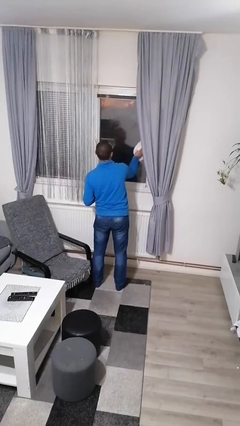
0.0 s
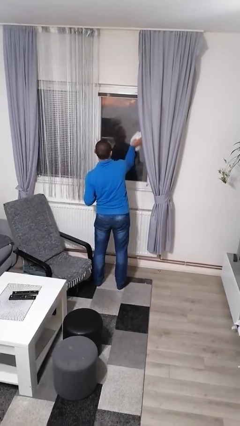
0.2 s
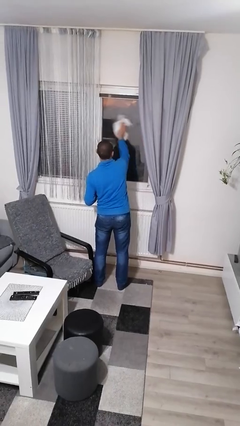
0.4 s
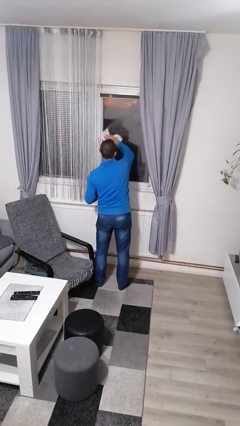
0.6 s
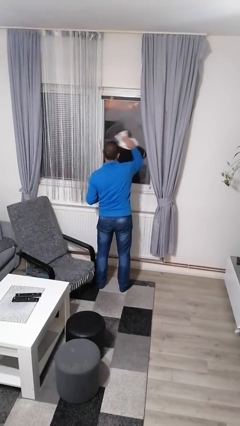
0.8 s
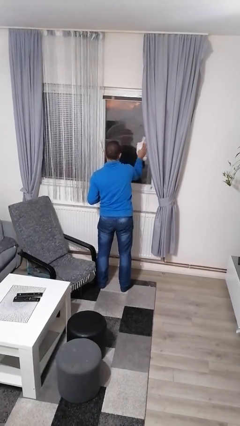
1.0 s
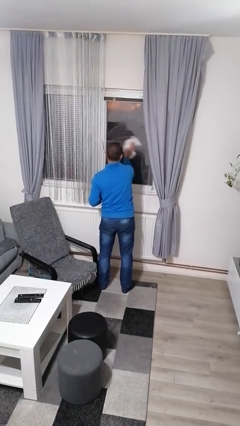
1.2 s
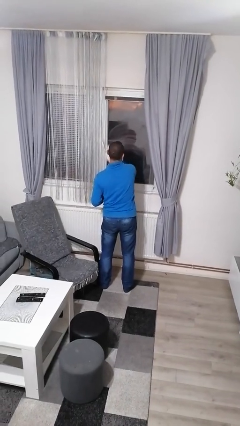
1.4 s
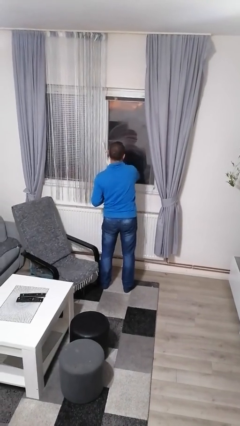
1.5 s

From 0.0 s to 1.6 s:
person washes window

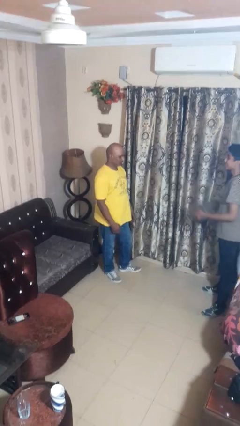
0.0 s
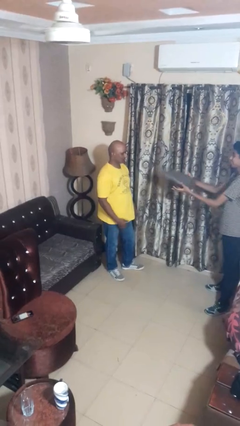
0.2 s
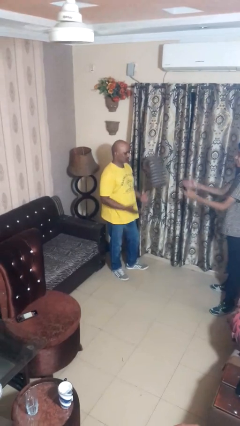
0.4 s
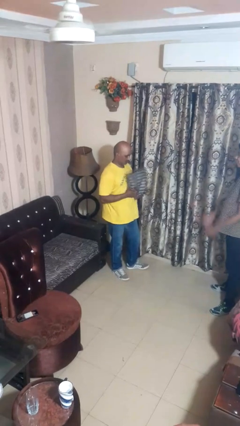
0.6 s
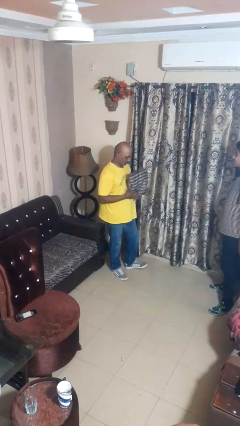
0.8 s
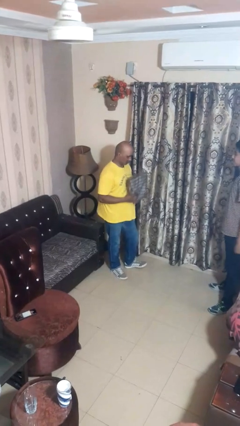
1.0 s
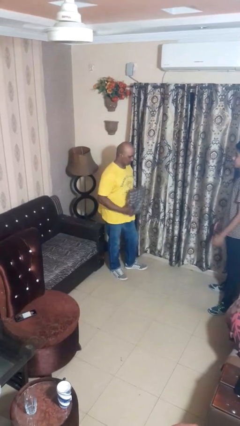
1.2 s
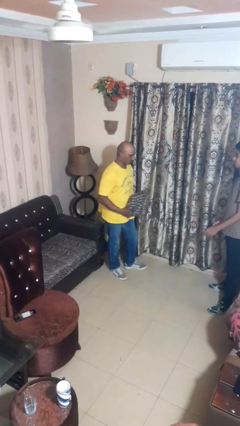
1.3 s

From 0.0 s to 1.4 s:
person catches object from person

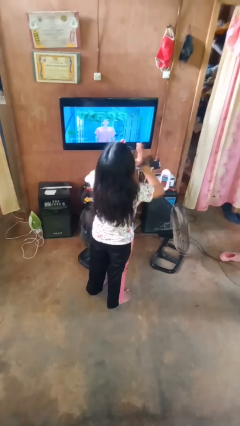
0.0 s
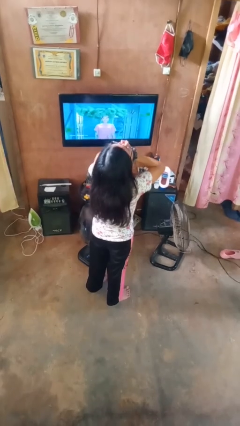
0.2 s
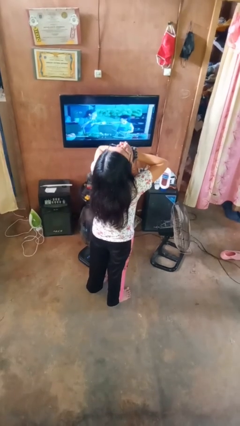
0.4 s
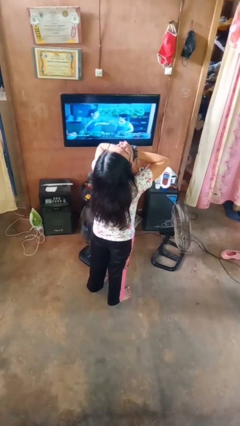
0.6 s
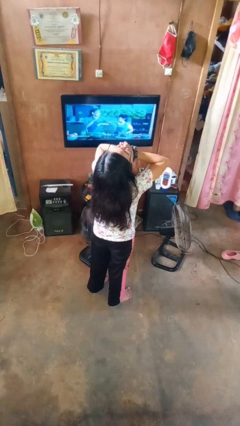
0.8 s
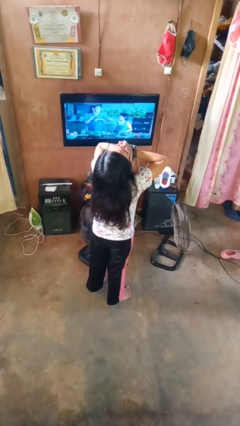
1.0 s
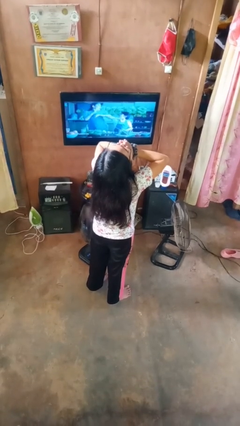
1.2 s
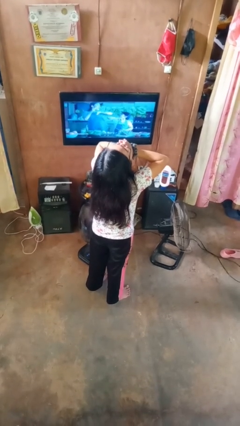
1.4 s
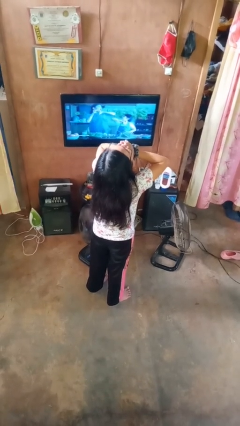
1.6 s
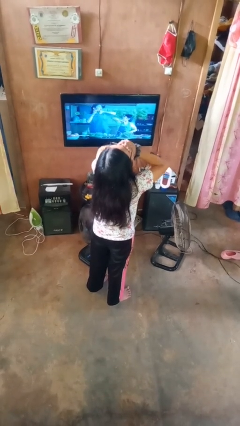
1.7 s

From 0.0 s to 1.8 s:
person yawns

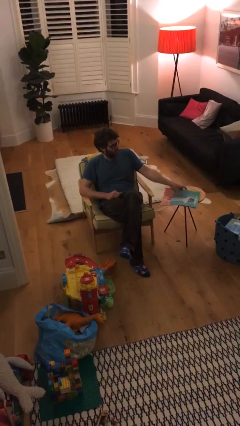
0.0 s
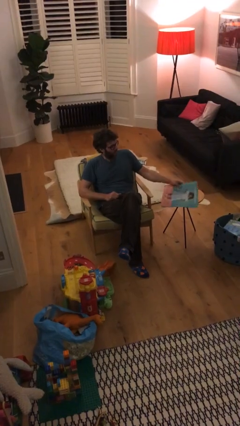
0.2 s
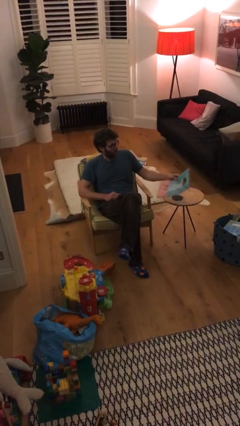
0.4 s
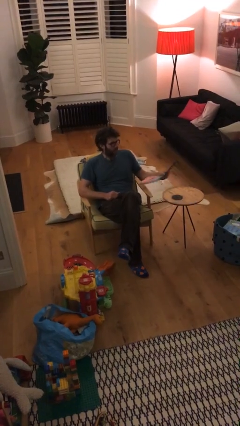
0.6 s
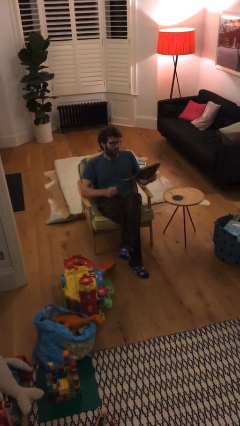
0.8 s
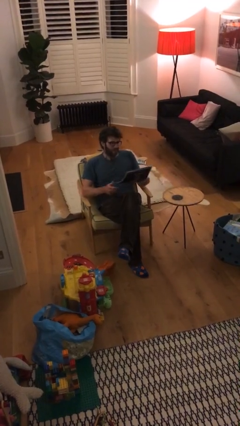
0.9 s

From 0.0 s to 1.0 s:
person picks up object from table

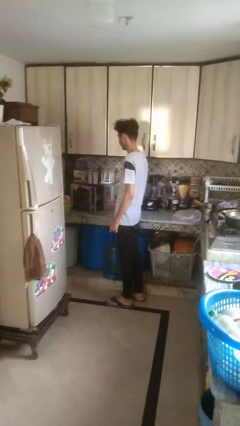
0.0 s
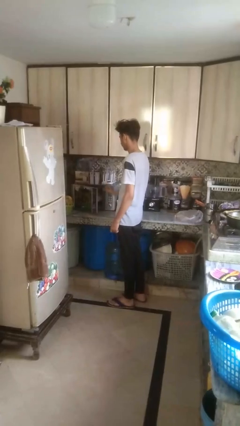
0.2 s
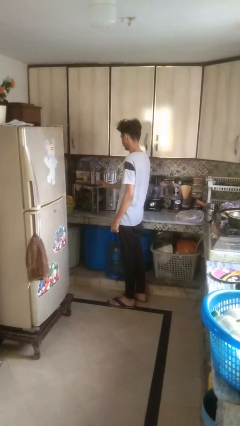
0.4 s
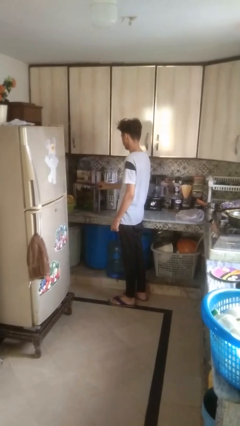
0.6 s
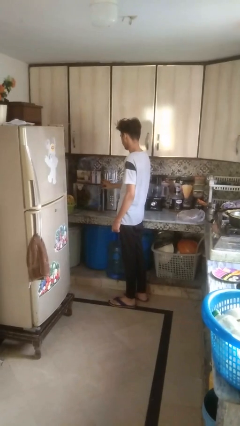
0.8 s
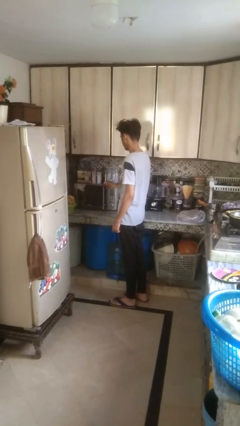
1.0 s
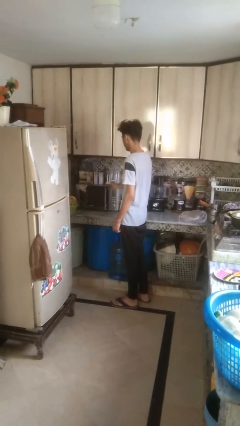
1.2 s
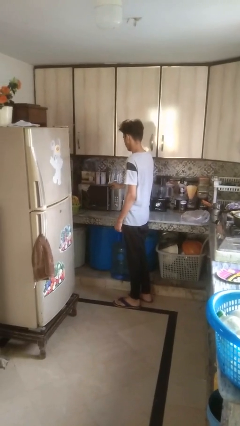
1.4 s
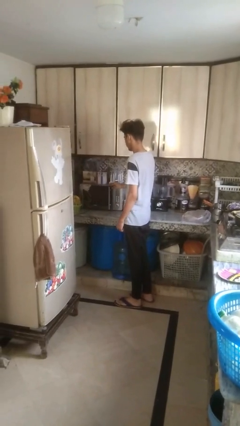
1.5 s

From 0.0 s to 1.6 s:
person closes oven door

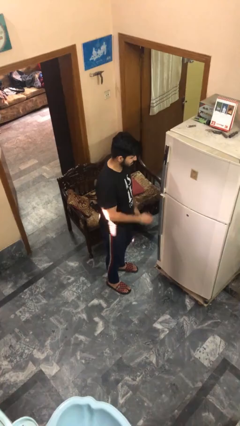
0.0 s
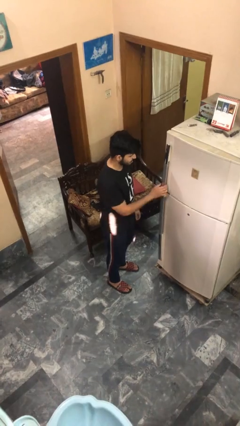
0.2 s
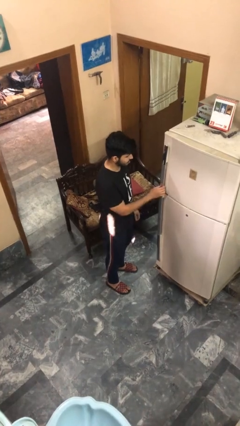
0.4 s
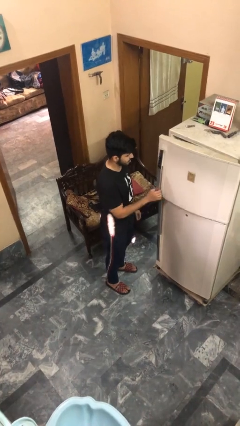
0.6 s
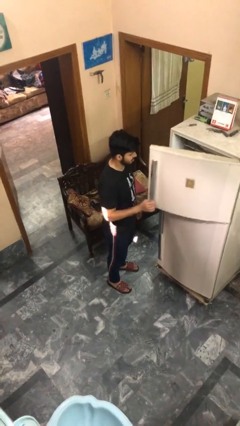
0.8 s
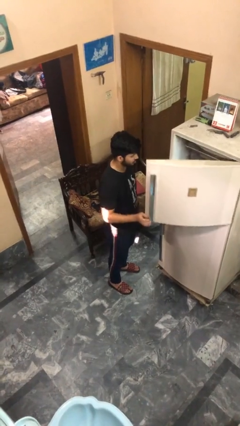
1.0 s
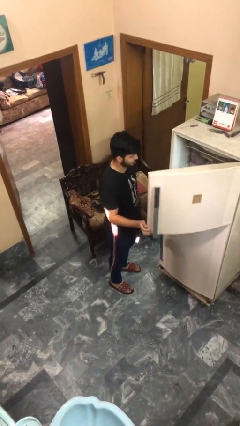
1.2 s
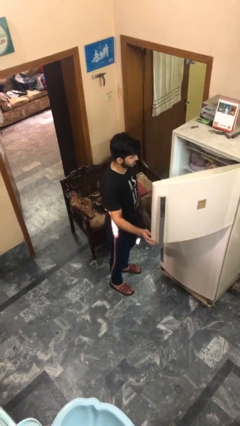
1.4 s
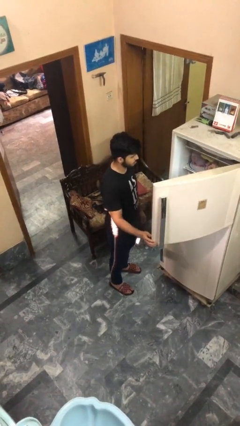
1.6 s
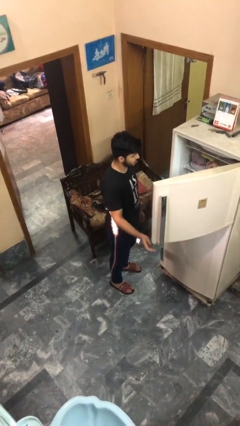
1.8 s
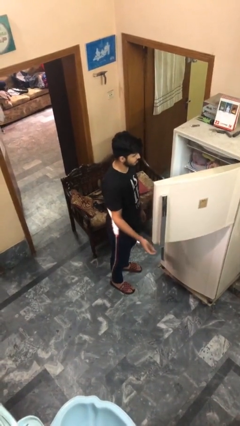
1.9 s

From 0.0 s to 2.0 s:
person opens refrigerator

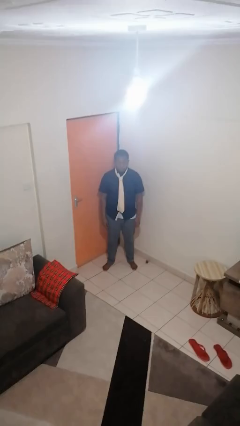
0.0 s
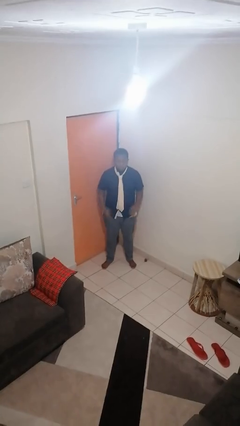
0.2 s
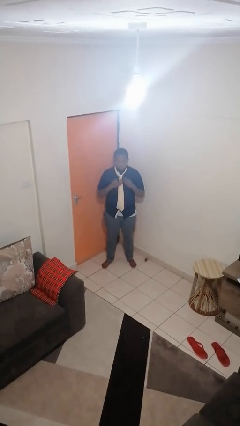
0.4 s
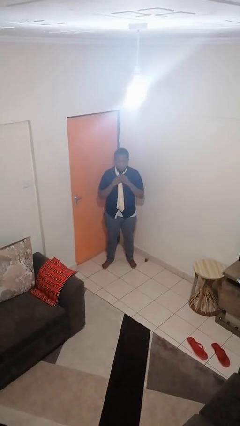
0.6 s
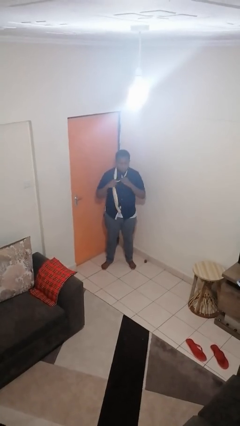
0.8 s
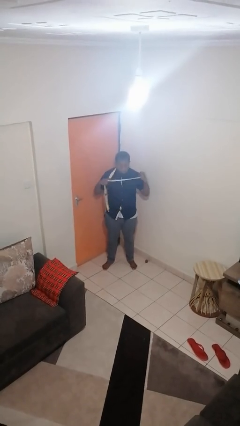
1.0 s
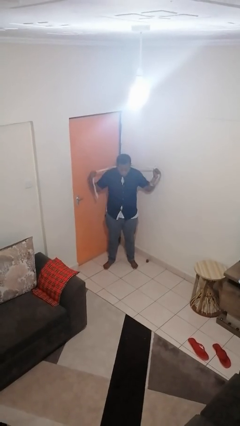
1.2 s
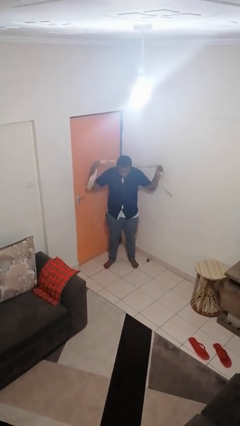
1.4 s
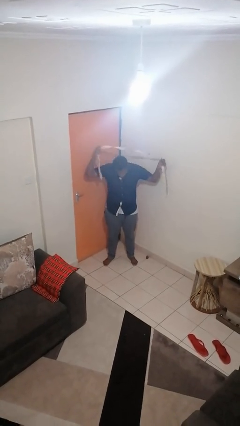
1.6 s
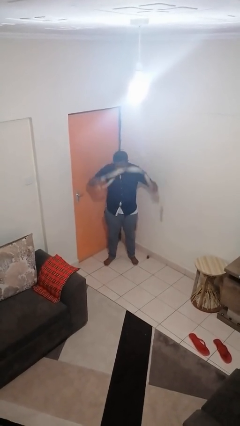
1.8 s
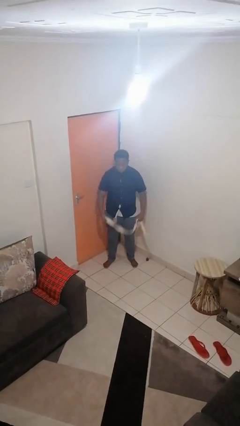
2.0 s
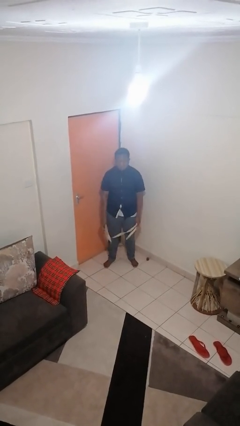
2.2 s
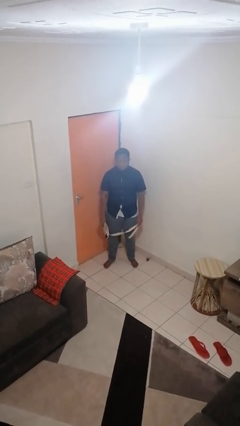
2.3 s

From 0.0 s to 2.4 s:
person takes off necktie

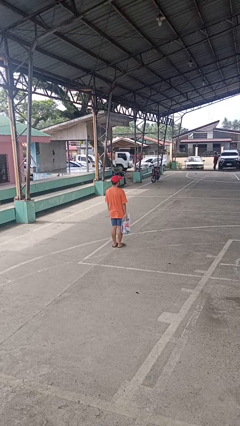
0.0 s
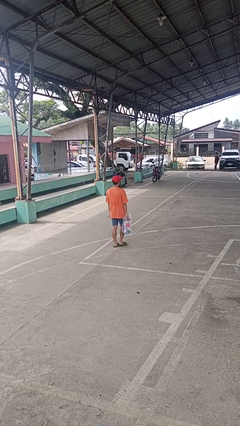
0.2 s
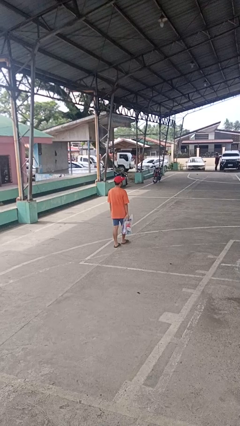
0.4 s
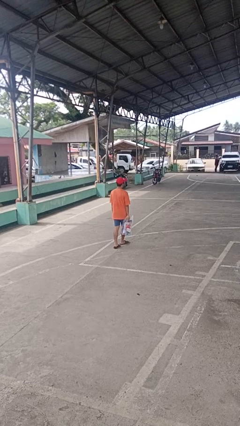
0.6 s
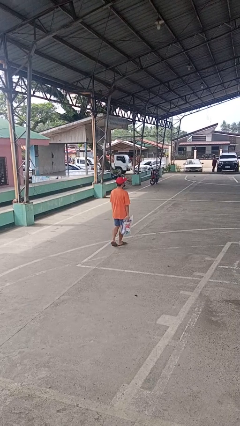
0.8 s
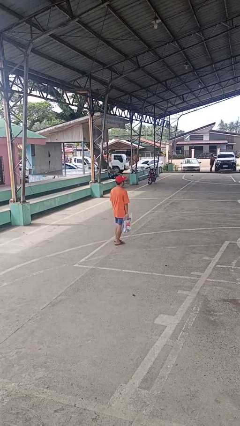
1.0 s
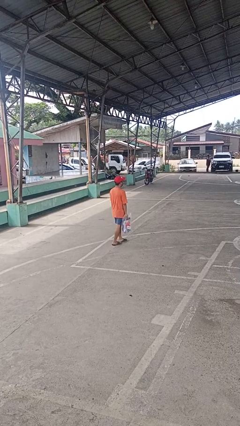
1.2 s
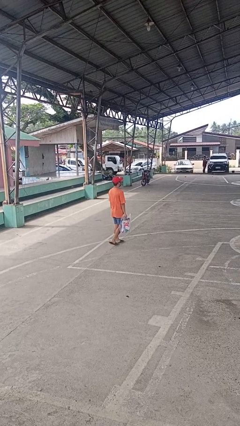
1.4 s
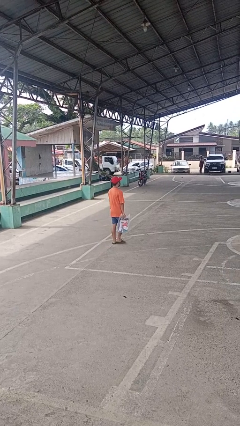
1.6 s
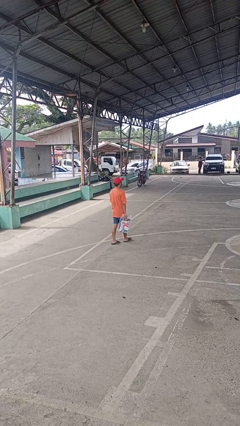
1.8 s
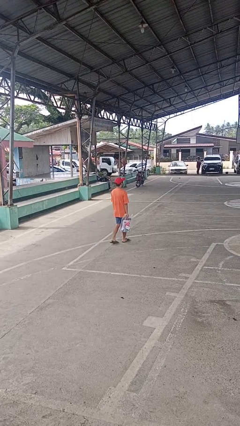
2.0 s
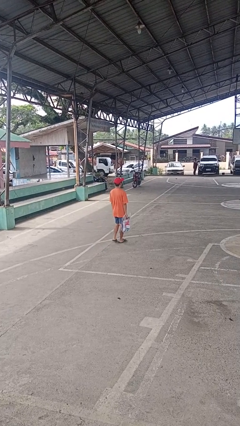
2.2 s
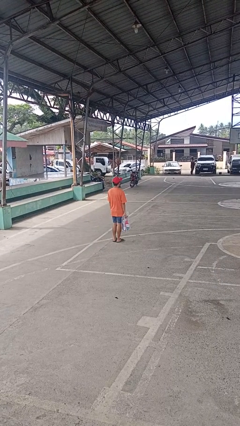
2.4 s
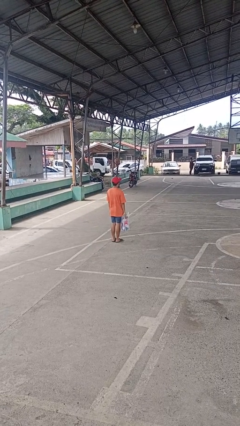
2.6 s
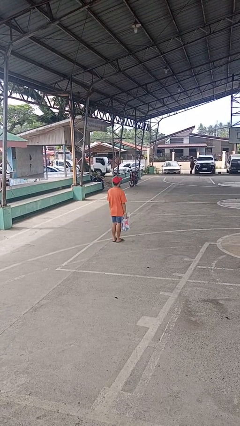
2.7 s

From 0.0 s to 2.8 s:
person carries groceries

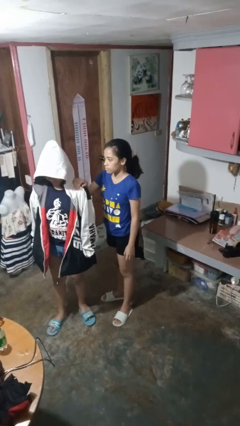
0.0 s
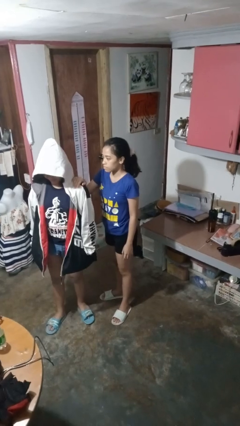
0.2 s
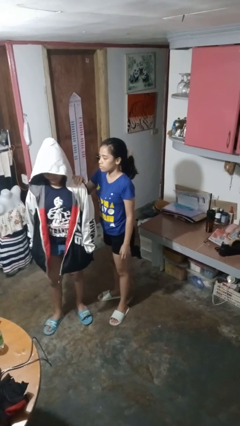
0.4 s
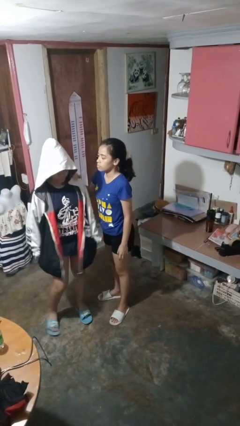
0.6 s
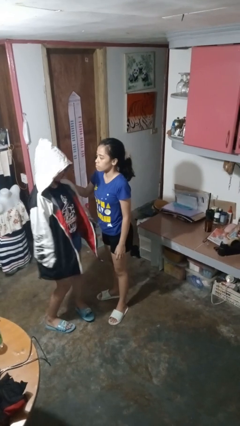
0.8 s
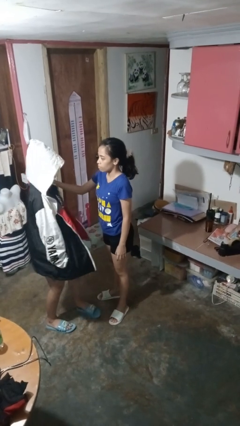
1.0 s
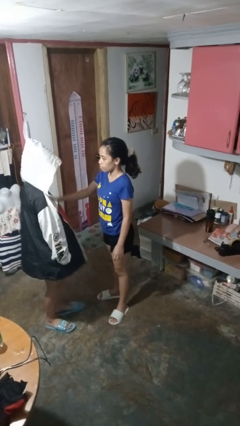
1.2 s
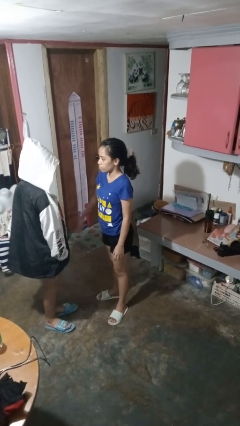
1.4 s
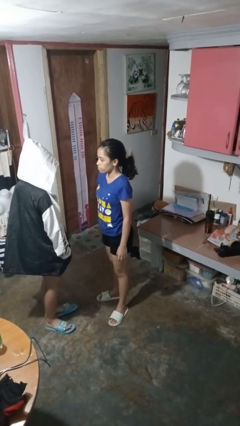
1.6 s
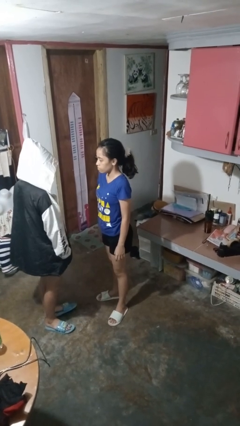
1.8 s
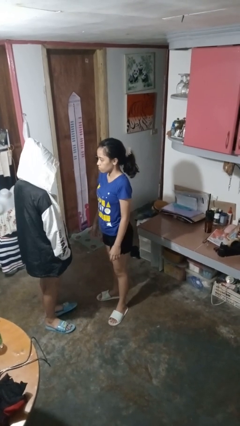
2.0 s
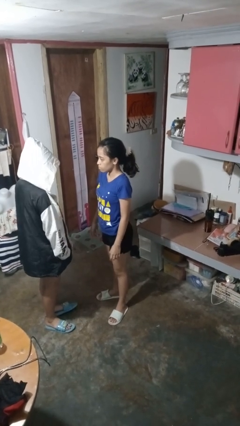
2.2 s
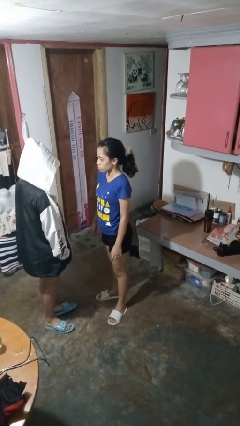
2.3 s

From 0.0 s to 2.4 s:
person spins person around
